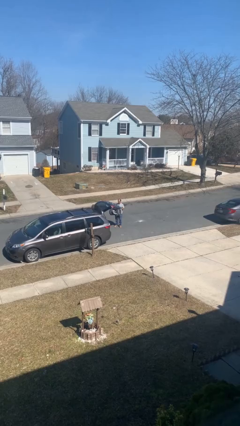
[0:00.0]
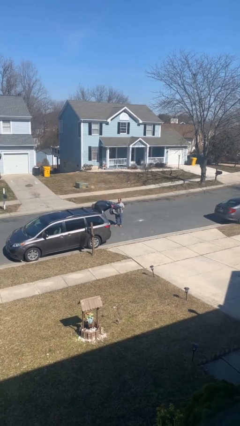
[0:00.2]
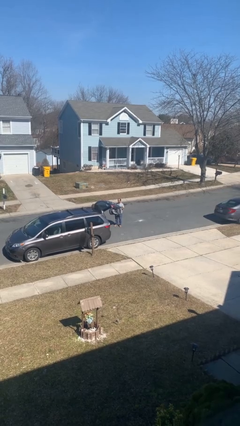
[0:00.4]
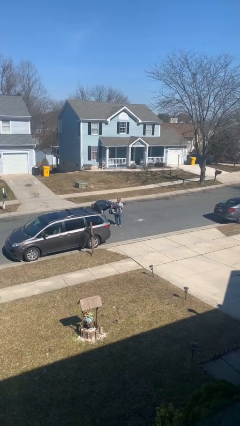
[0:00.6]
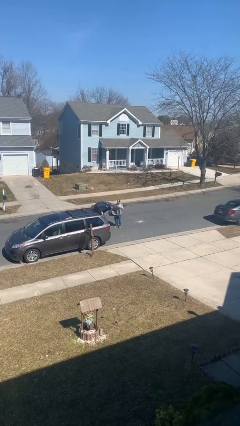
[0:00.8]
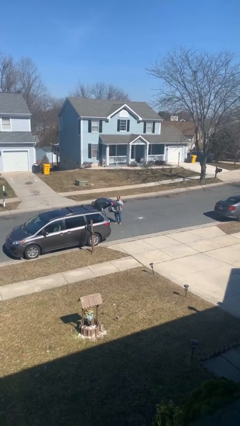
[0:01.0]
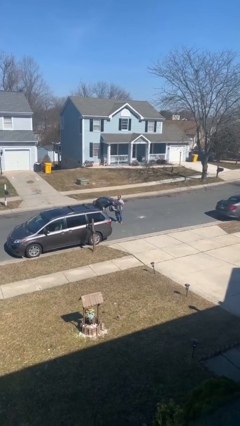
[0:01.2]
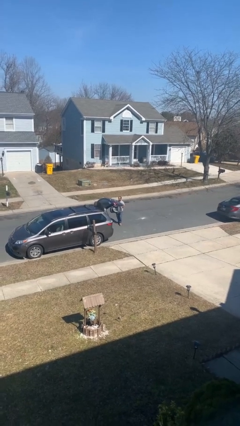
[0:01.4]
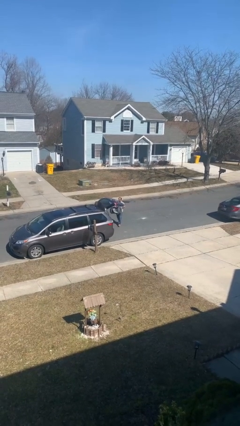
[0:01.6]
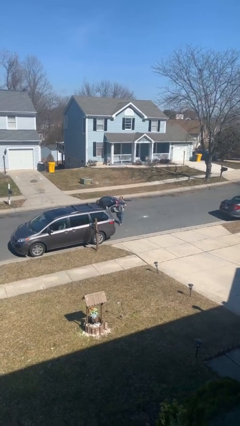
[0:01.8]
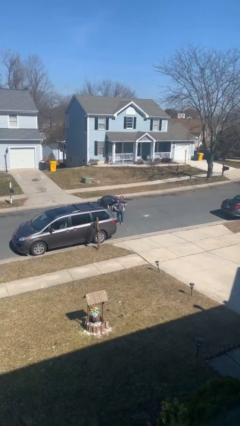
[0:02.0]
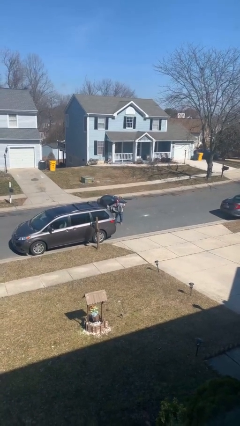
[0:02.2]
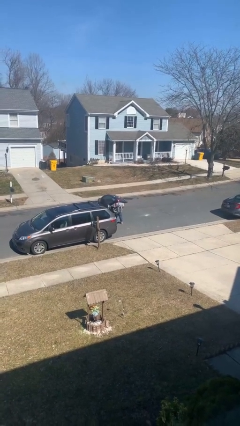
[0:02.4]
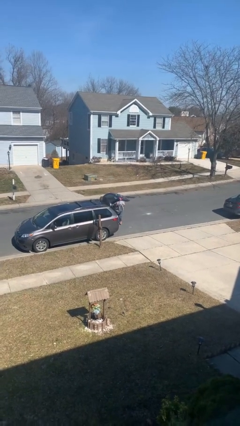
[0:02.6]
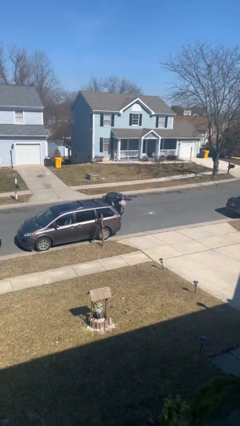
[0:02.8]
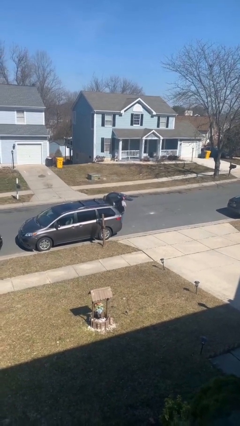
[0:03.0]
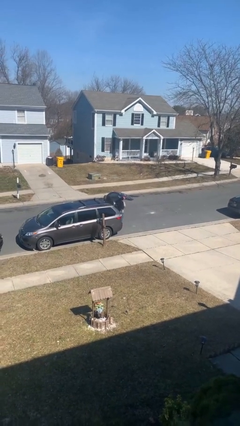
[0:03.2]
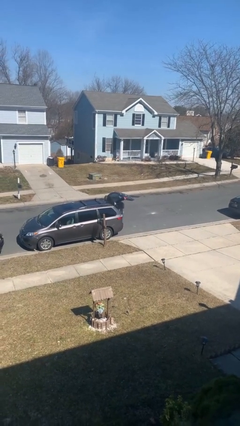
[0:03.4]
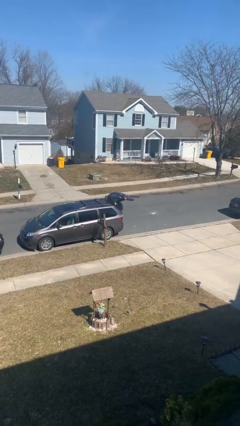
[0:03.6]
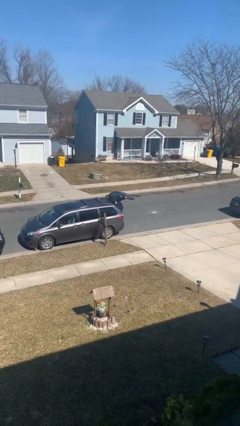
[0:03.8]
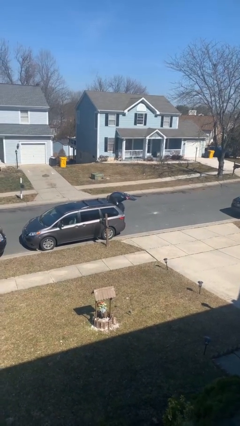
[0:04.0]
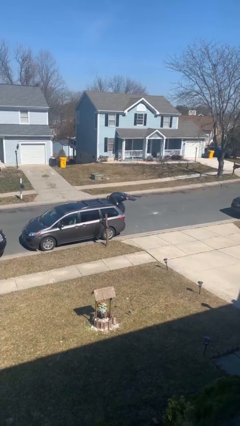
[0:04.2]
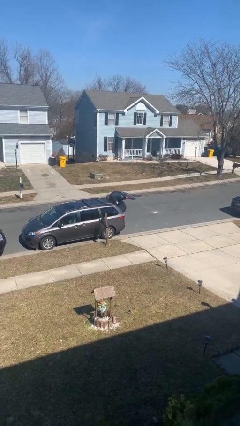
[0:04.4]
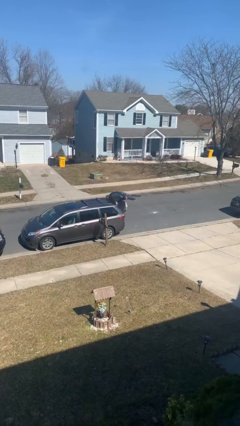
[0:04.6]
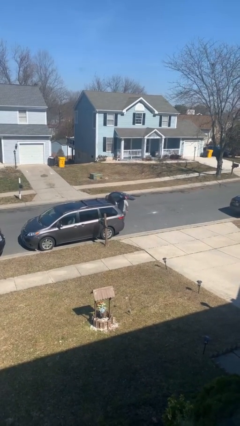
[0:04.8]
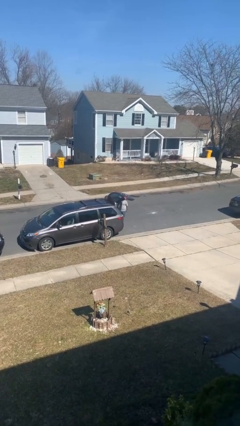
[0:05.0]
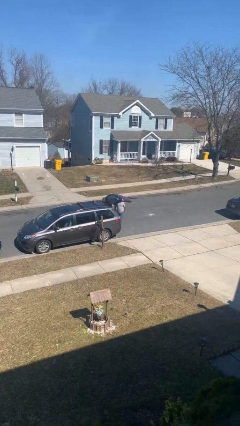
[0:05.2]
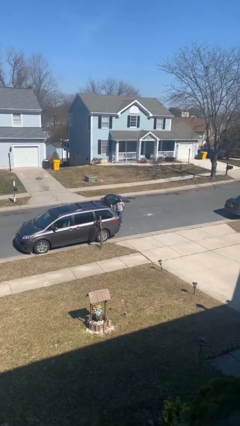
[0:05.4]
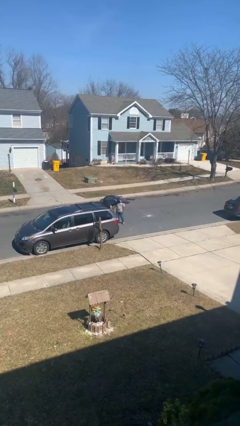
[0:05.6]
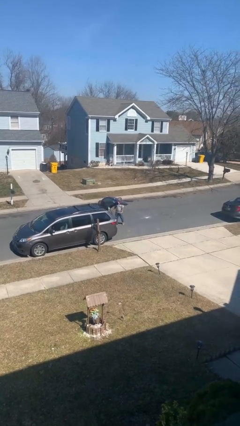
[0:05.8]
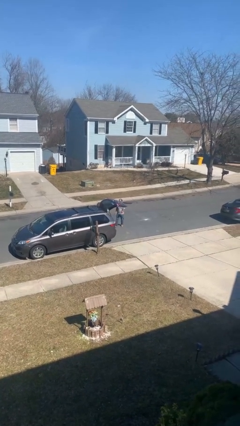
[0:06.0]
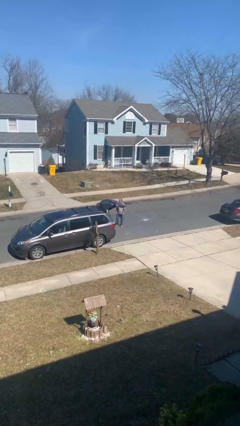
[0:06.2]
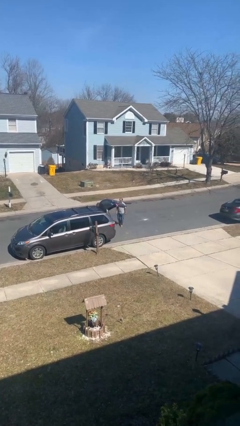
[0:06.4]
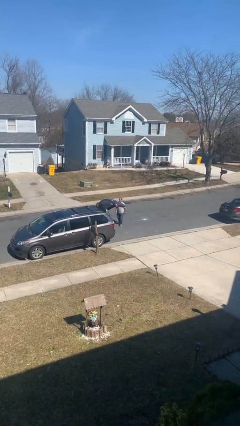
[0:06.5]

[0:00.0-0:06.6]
person loads car

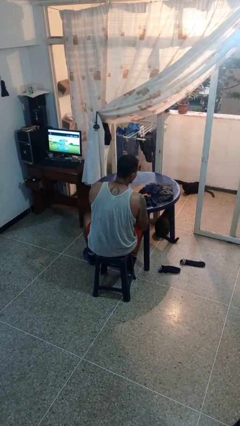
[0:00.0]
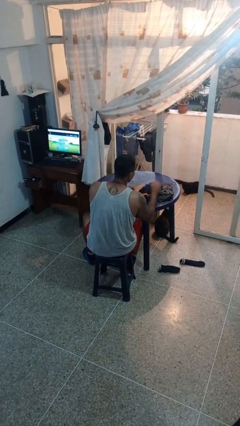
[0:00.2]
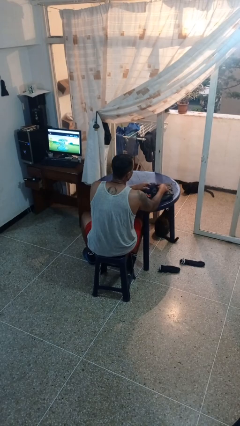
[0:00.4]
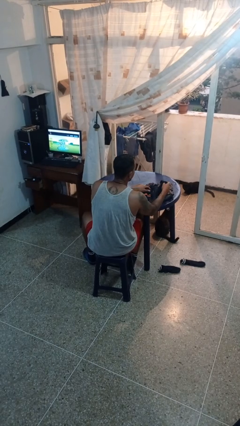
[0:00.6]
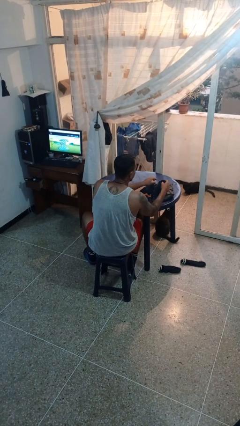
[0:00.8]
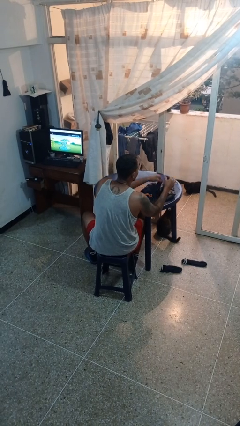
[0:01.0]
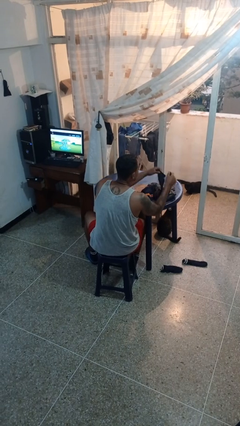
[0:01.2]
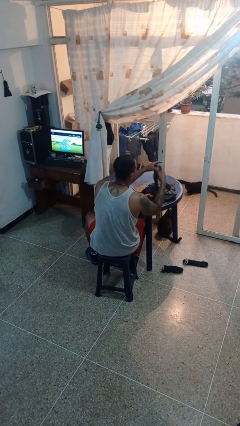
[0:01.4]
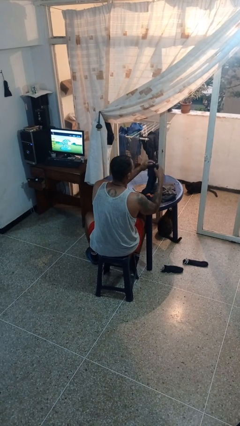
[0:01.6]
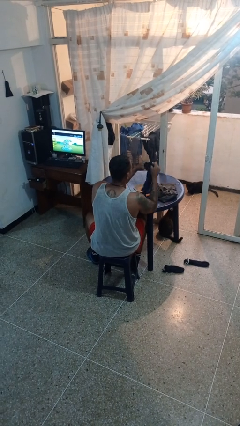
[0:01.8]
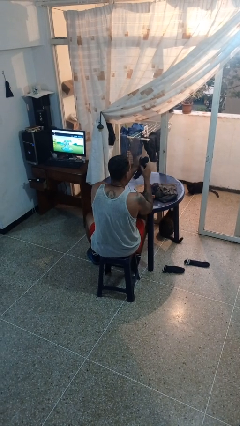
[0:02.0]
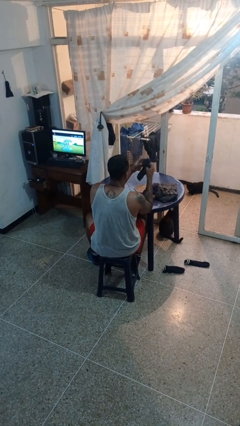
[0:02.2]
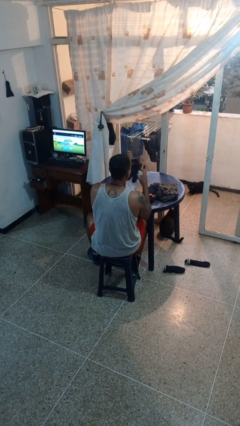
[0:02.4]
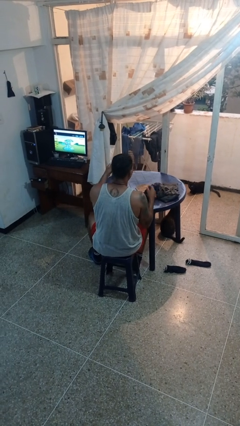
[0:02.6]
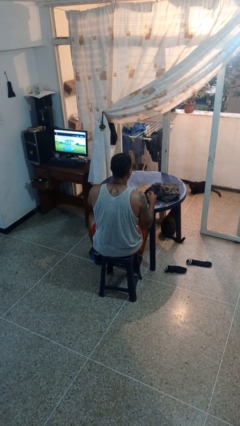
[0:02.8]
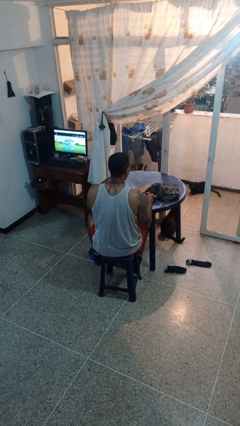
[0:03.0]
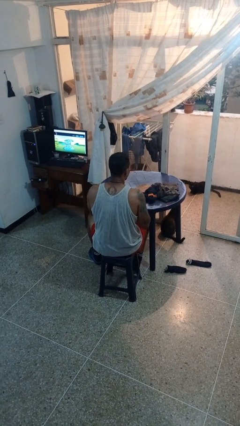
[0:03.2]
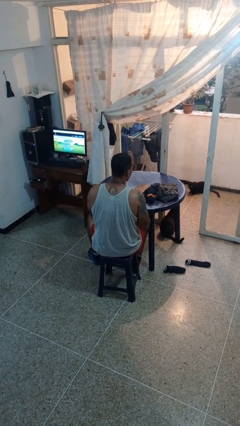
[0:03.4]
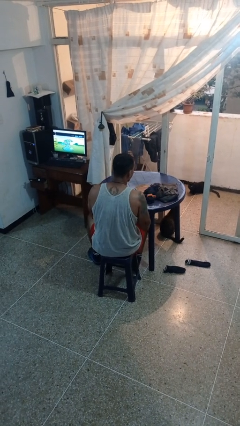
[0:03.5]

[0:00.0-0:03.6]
person folds socks

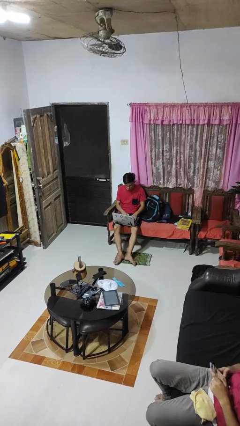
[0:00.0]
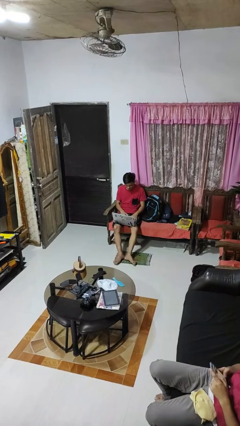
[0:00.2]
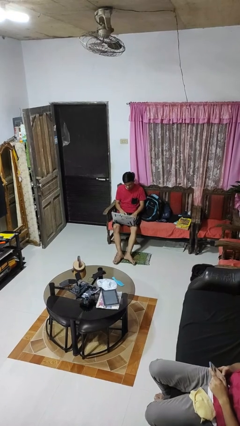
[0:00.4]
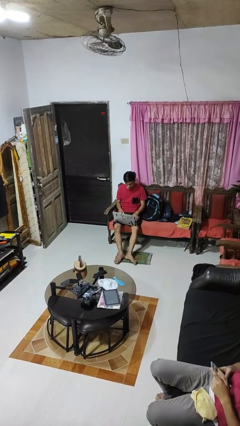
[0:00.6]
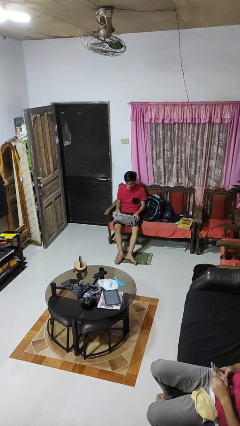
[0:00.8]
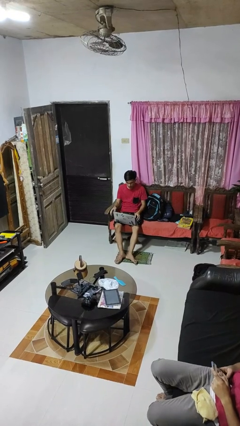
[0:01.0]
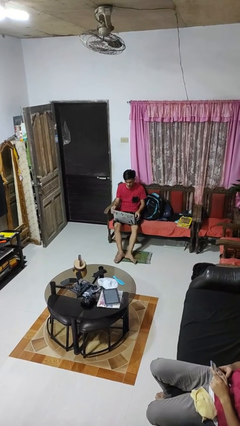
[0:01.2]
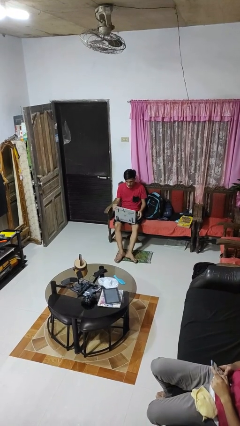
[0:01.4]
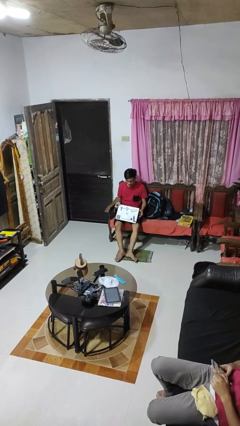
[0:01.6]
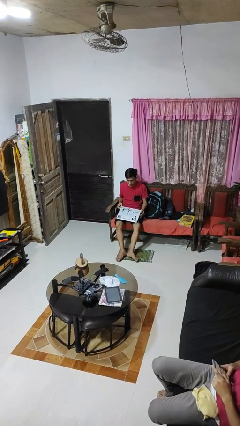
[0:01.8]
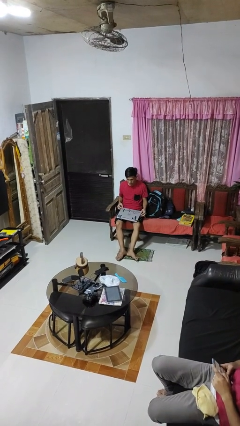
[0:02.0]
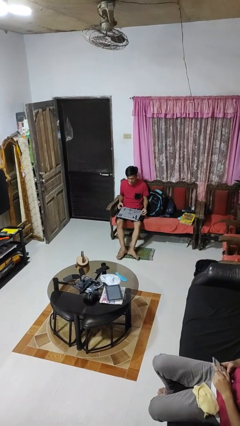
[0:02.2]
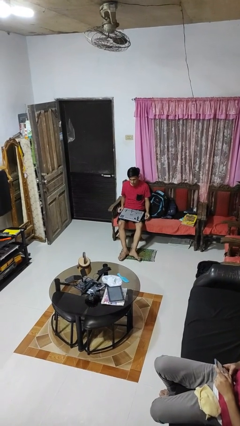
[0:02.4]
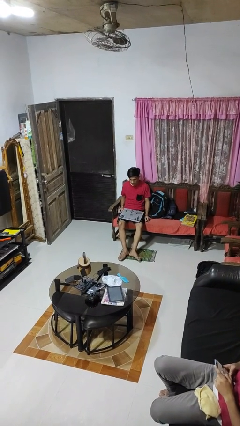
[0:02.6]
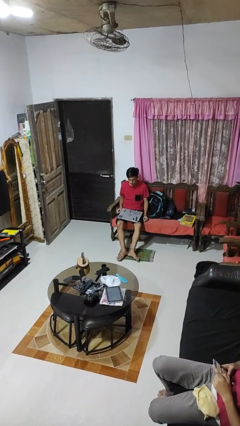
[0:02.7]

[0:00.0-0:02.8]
person closes laptop

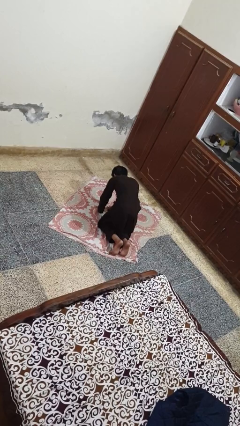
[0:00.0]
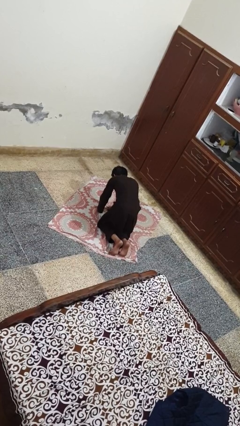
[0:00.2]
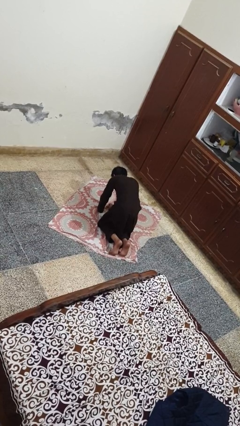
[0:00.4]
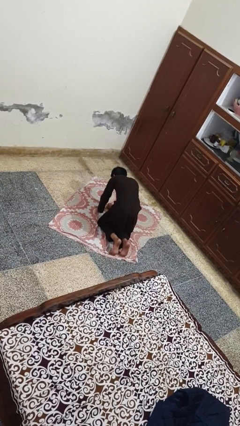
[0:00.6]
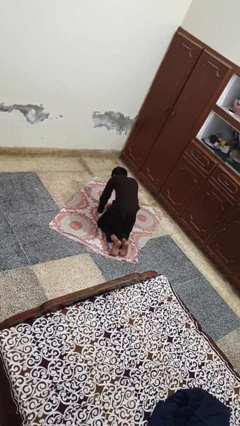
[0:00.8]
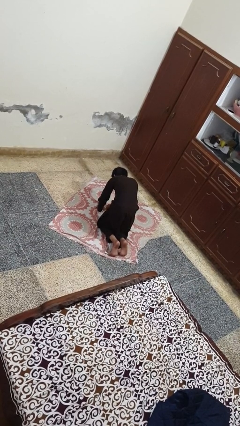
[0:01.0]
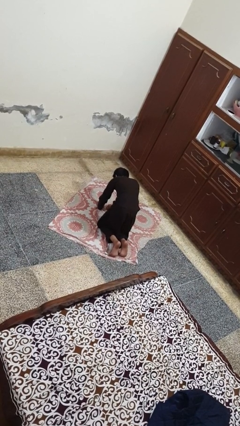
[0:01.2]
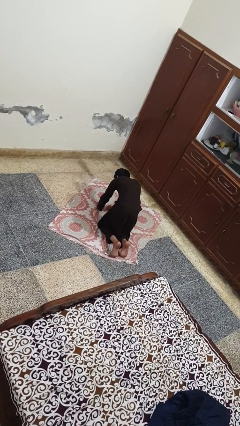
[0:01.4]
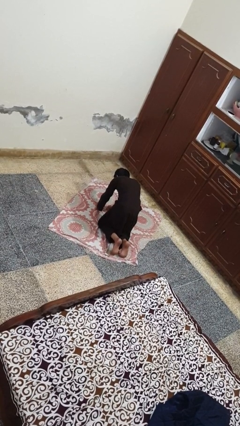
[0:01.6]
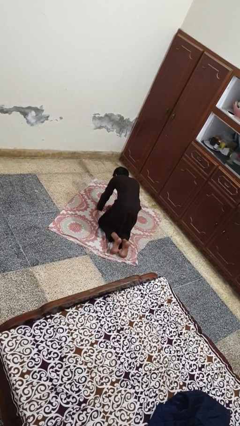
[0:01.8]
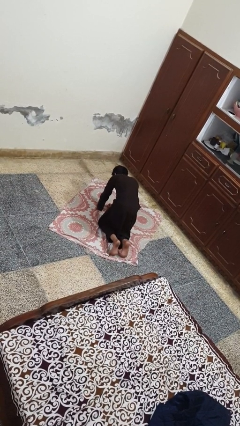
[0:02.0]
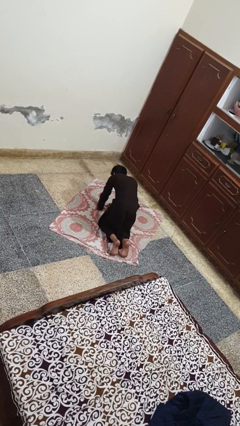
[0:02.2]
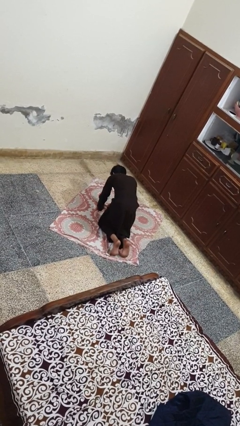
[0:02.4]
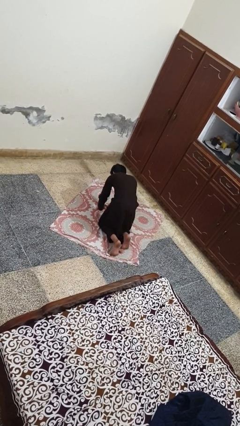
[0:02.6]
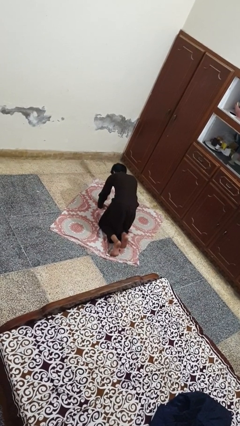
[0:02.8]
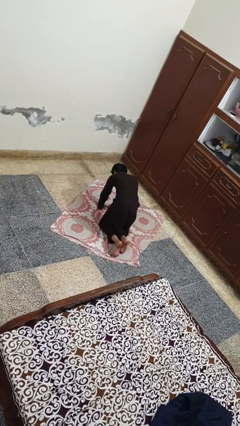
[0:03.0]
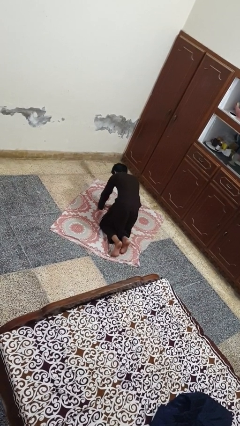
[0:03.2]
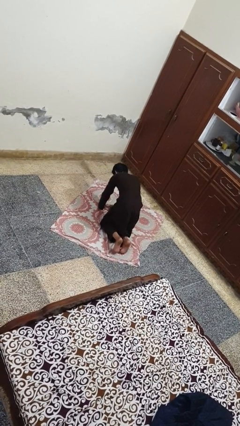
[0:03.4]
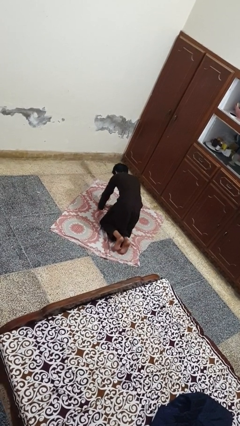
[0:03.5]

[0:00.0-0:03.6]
person crawls

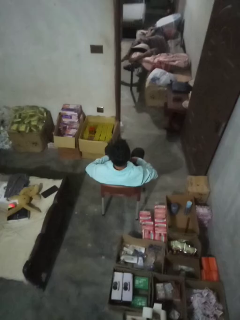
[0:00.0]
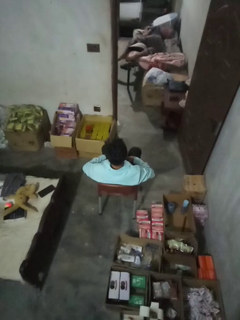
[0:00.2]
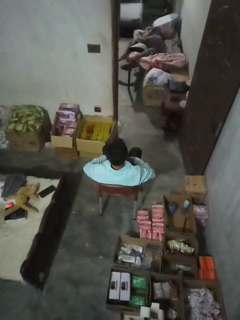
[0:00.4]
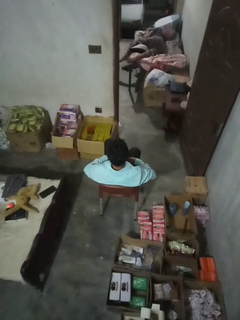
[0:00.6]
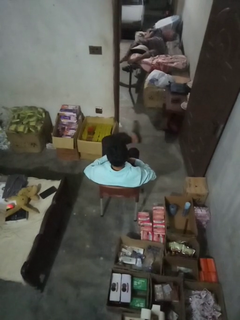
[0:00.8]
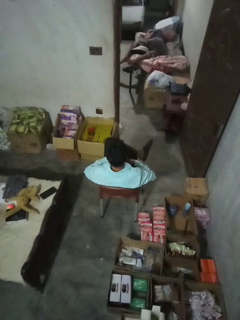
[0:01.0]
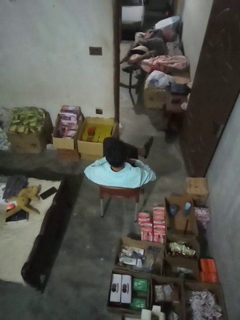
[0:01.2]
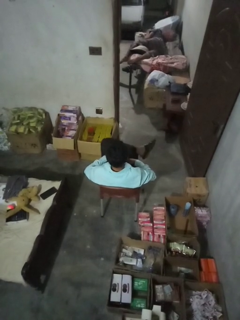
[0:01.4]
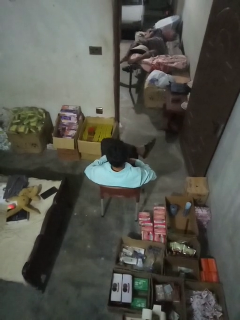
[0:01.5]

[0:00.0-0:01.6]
person crosses legs
